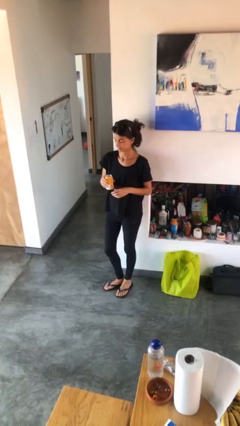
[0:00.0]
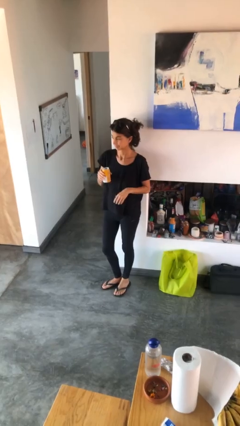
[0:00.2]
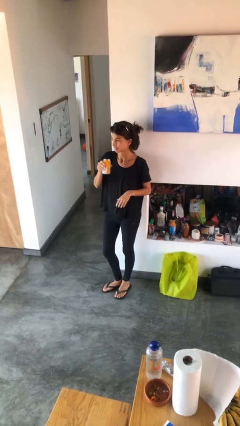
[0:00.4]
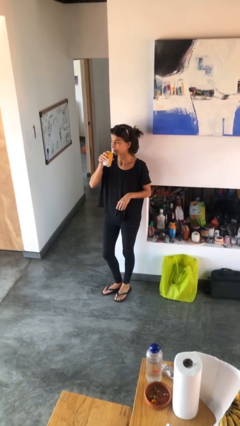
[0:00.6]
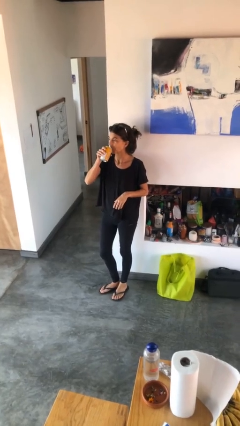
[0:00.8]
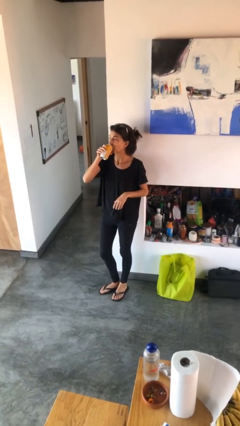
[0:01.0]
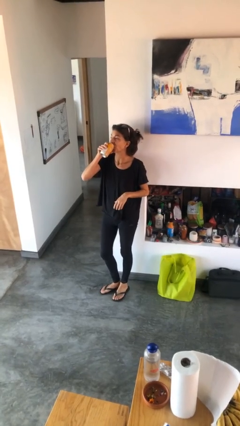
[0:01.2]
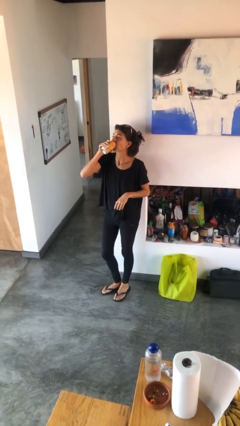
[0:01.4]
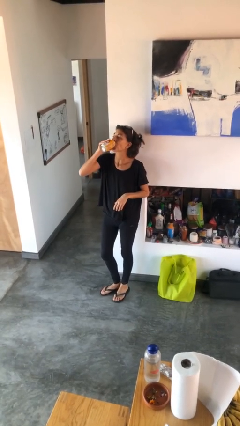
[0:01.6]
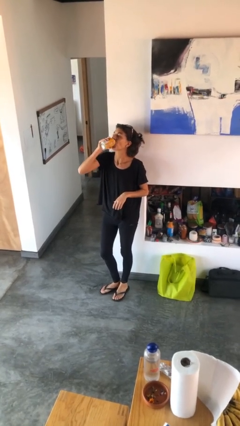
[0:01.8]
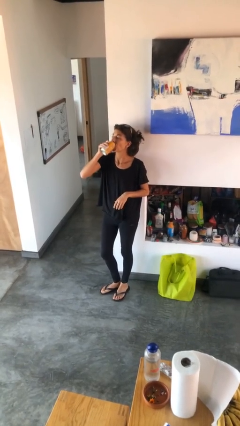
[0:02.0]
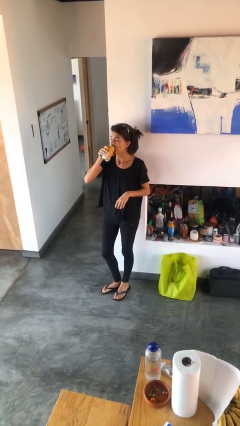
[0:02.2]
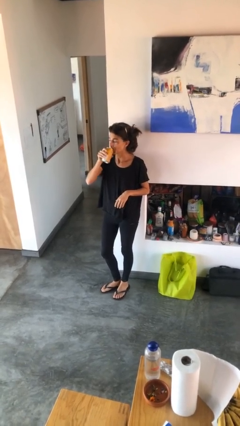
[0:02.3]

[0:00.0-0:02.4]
person drinks from beverage can

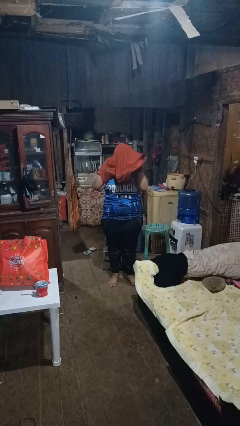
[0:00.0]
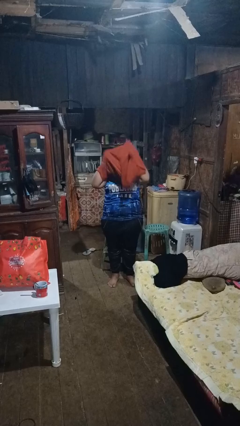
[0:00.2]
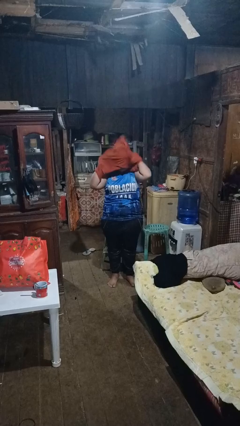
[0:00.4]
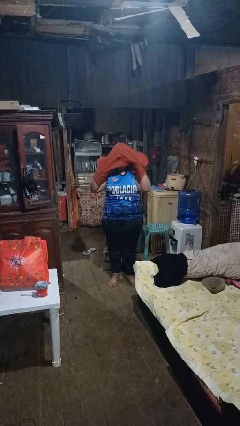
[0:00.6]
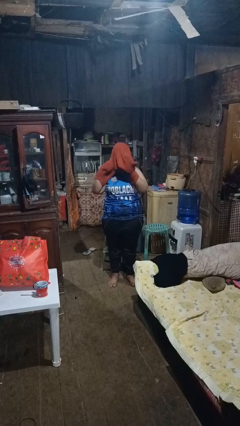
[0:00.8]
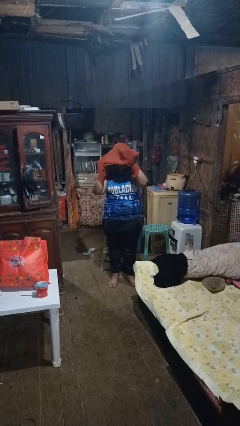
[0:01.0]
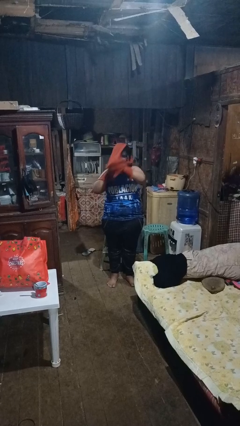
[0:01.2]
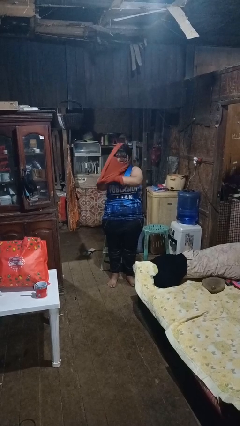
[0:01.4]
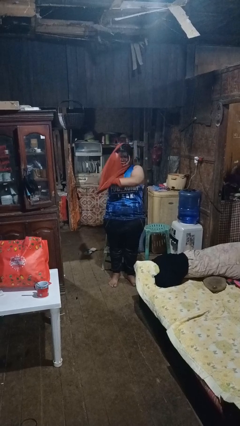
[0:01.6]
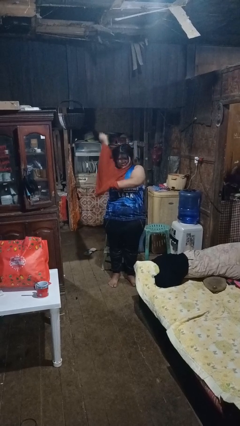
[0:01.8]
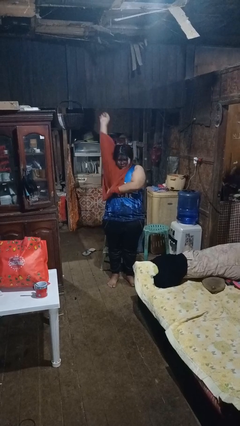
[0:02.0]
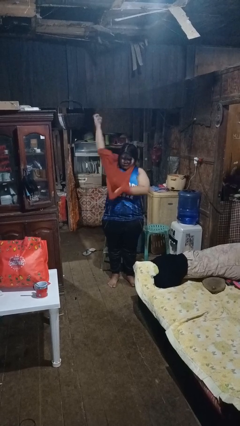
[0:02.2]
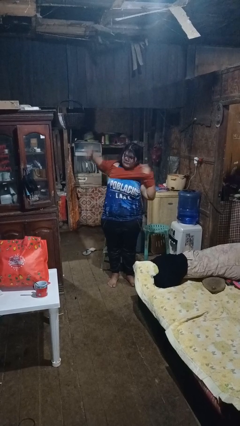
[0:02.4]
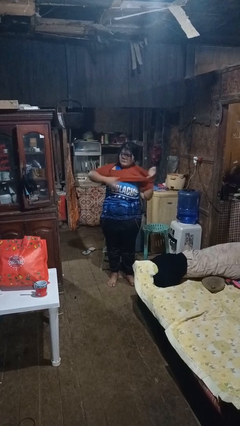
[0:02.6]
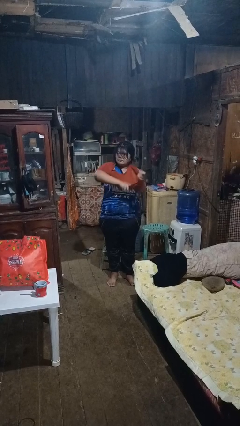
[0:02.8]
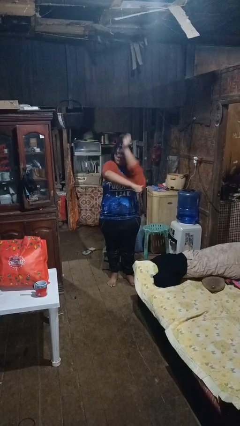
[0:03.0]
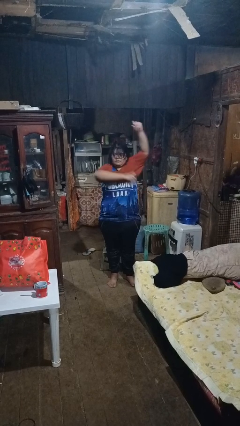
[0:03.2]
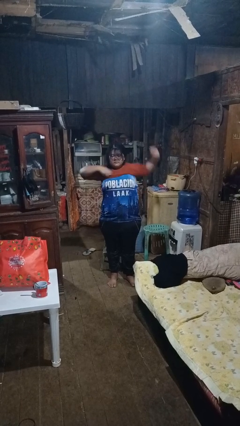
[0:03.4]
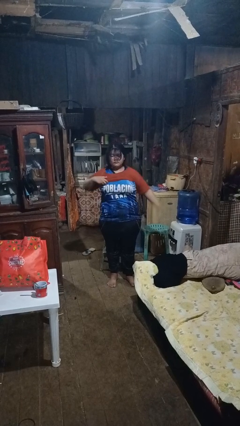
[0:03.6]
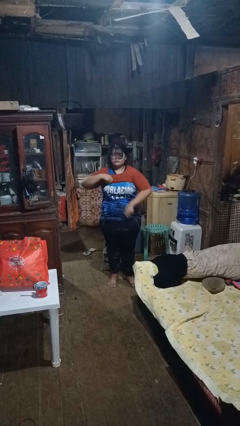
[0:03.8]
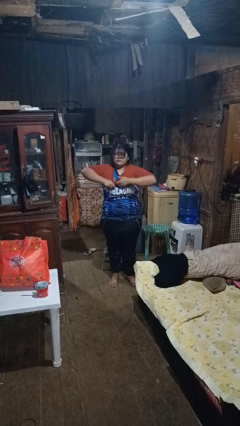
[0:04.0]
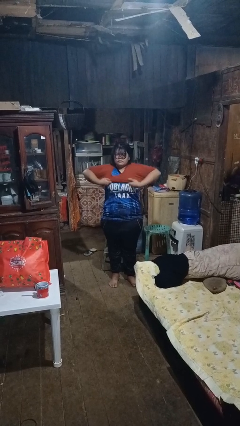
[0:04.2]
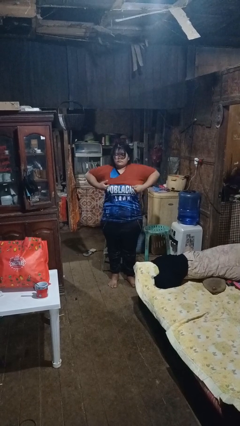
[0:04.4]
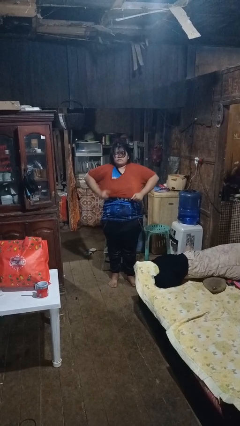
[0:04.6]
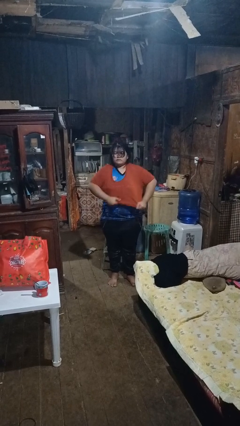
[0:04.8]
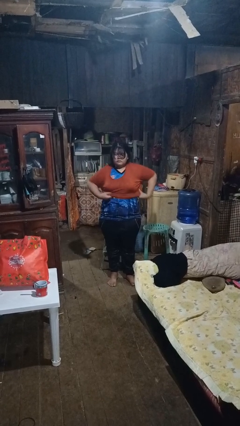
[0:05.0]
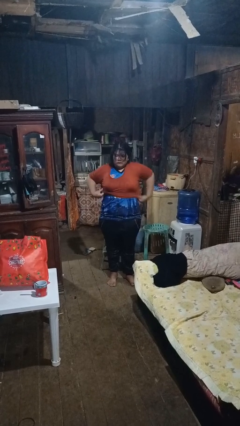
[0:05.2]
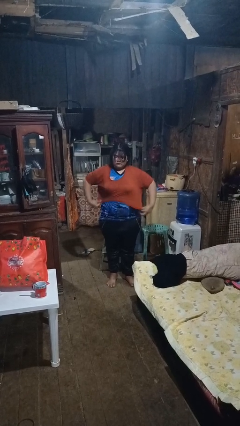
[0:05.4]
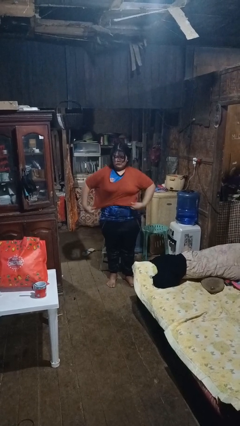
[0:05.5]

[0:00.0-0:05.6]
person puts on shirt

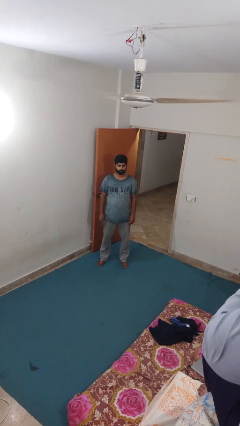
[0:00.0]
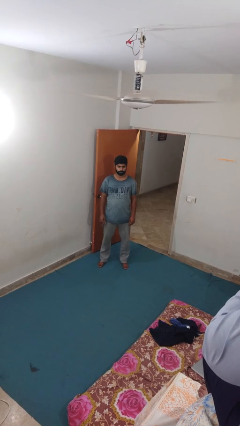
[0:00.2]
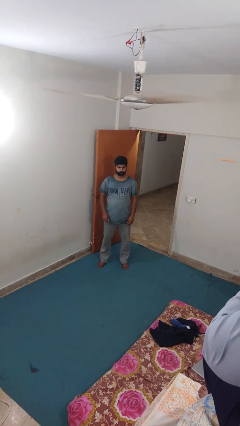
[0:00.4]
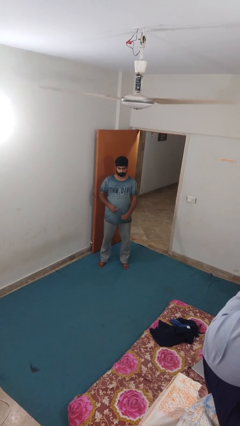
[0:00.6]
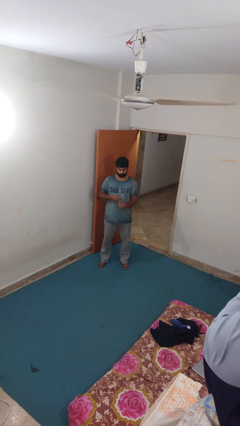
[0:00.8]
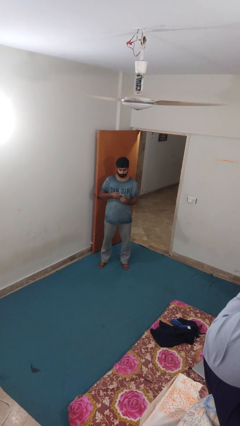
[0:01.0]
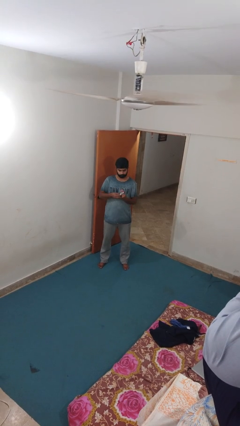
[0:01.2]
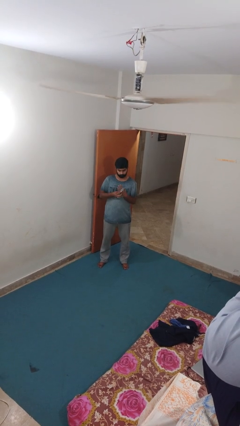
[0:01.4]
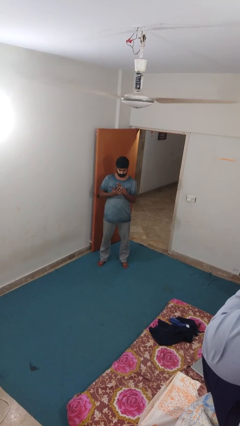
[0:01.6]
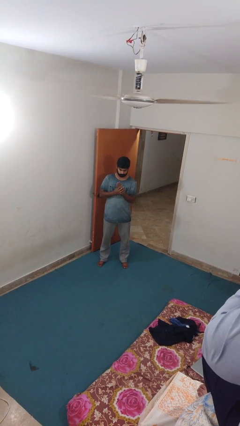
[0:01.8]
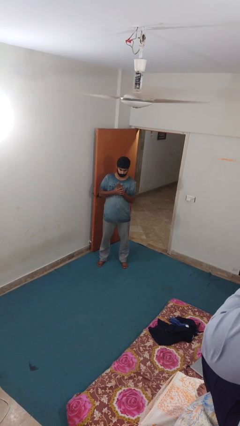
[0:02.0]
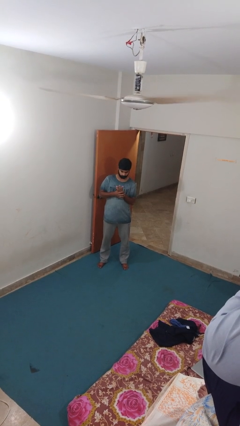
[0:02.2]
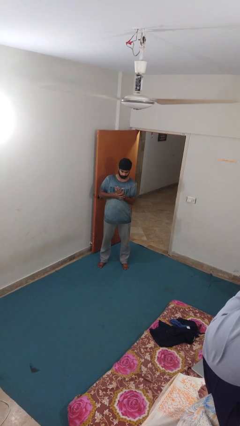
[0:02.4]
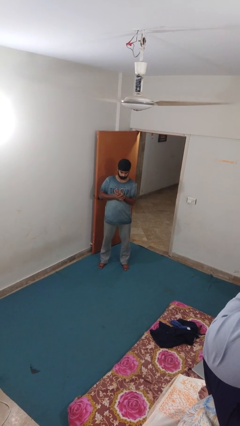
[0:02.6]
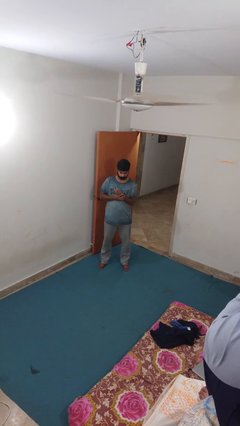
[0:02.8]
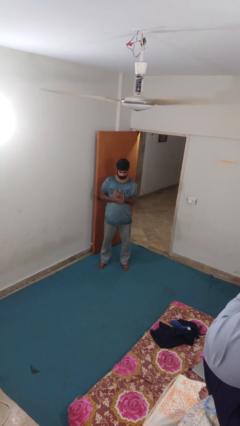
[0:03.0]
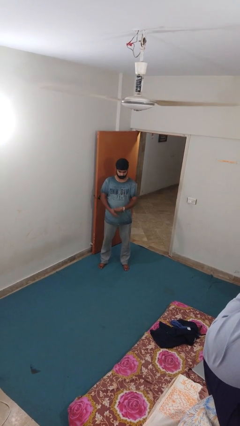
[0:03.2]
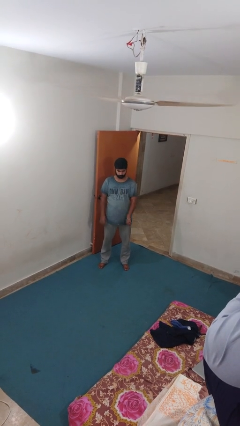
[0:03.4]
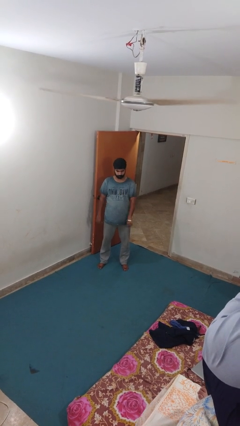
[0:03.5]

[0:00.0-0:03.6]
person puts on wristwatch

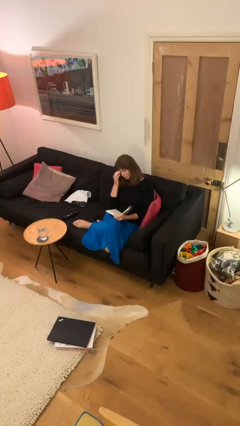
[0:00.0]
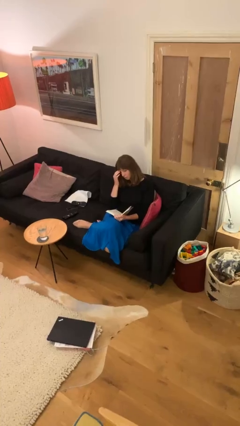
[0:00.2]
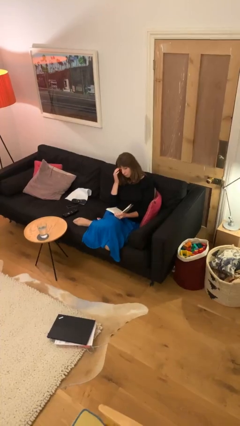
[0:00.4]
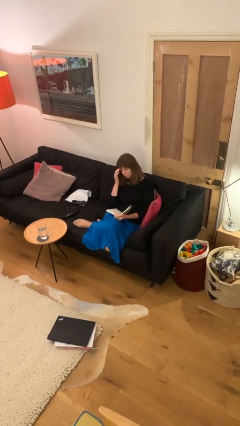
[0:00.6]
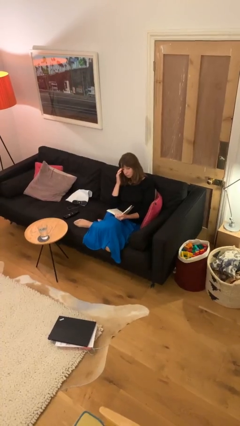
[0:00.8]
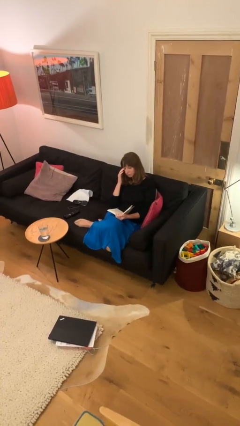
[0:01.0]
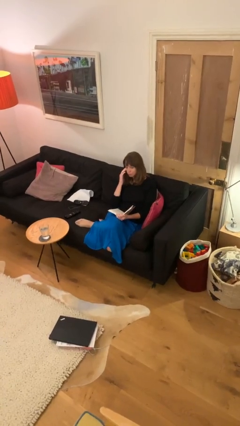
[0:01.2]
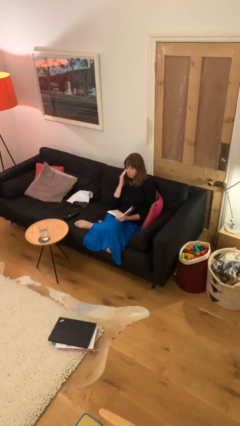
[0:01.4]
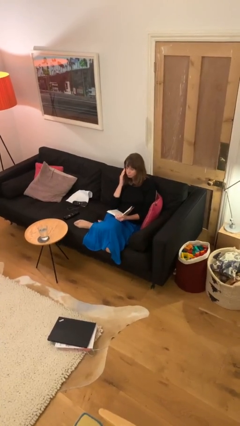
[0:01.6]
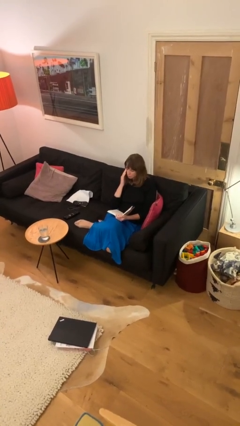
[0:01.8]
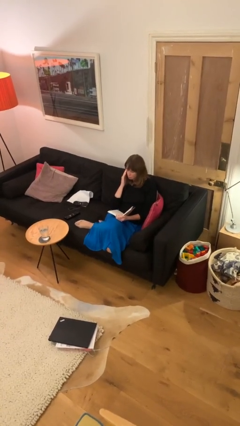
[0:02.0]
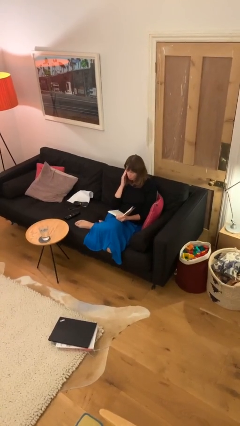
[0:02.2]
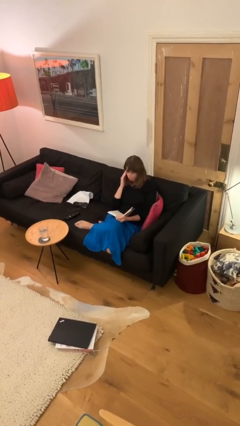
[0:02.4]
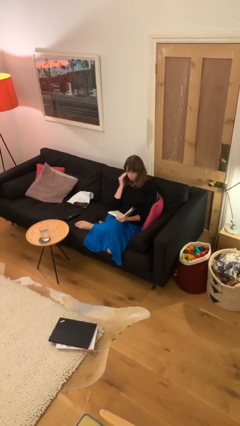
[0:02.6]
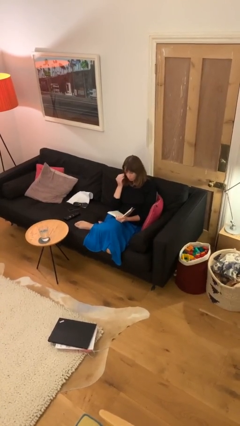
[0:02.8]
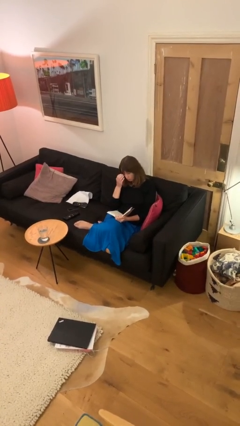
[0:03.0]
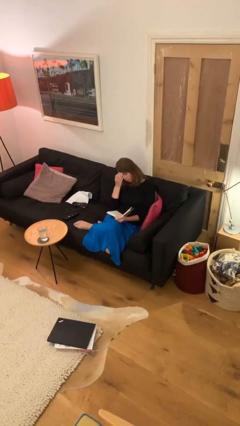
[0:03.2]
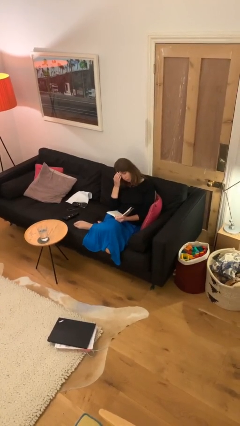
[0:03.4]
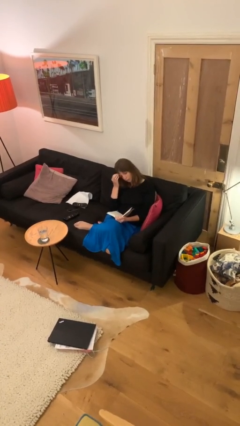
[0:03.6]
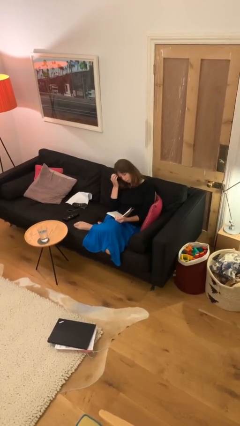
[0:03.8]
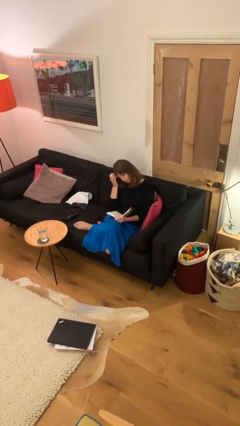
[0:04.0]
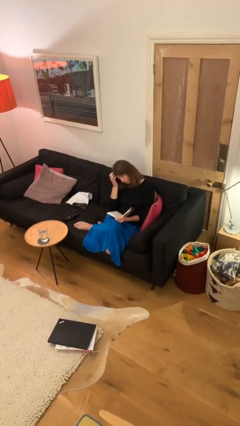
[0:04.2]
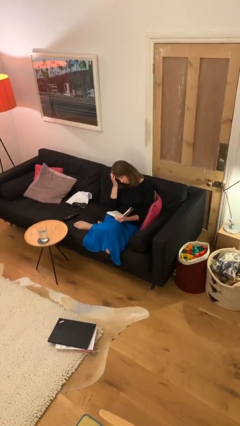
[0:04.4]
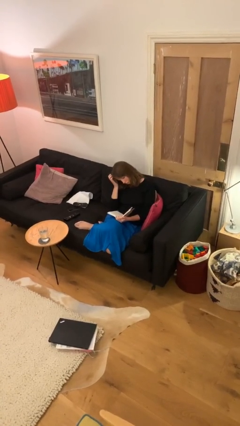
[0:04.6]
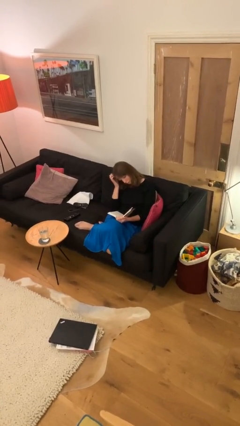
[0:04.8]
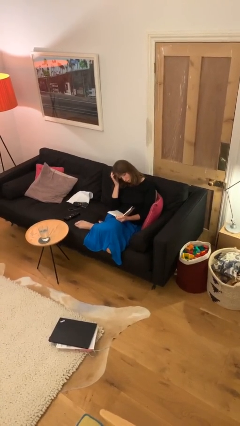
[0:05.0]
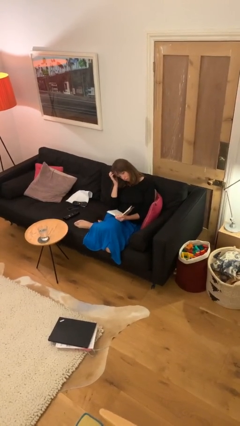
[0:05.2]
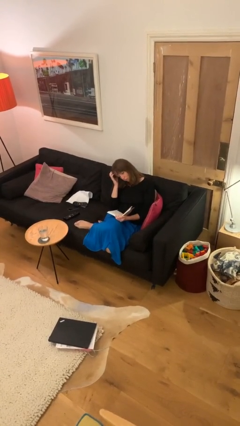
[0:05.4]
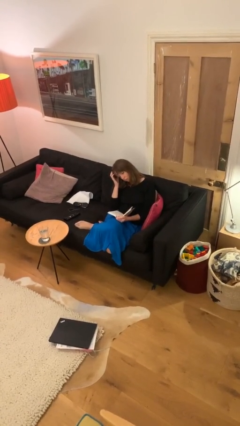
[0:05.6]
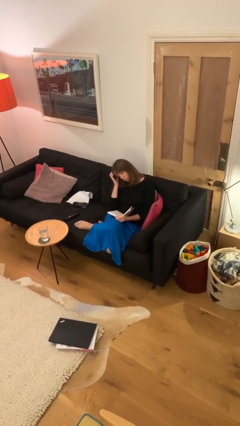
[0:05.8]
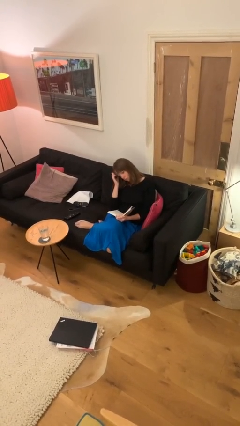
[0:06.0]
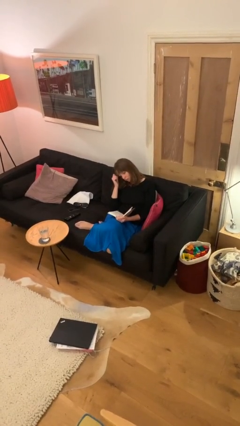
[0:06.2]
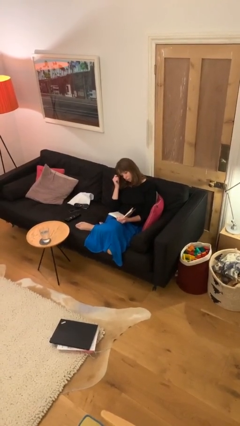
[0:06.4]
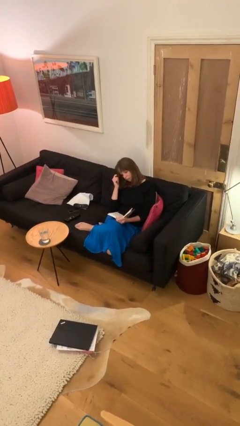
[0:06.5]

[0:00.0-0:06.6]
person reads document
